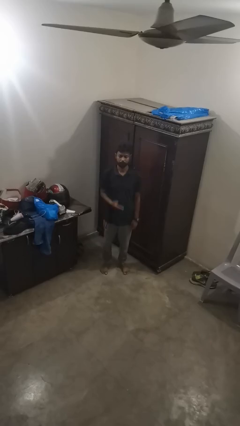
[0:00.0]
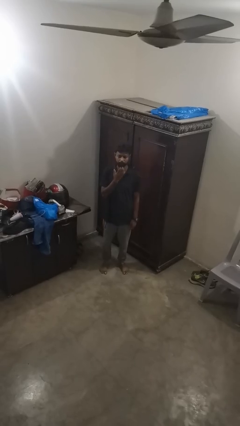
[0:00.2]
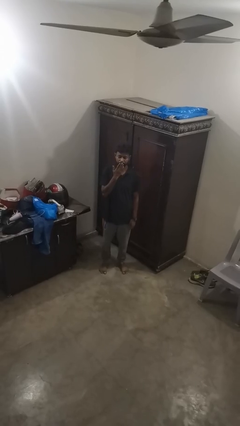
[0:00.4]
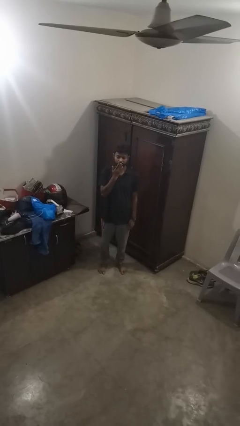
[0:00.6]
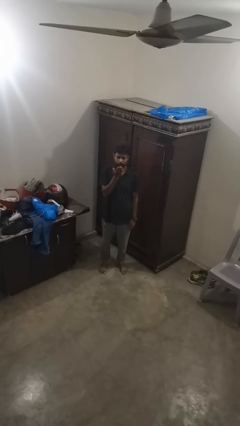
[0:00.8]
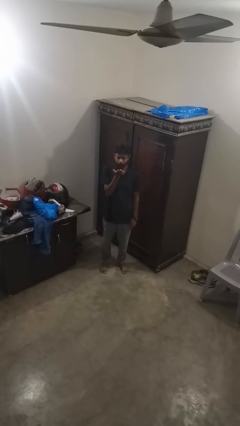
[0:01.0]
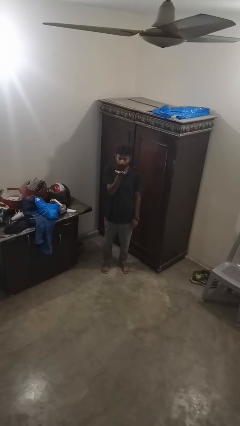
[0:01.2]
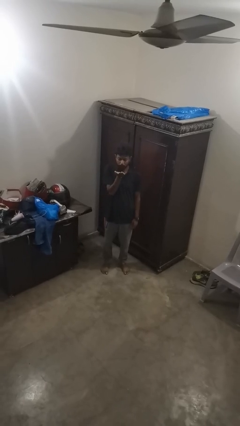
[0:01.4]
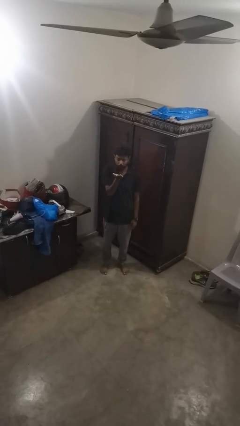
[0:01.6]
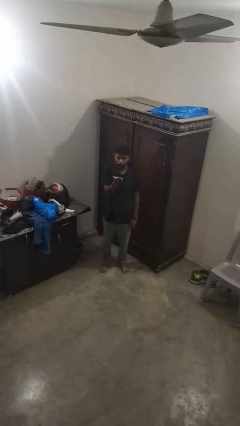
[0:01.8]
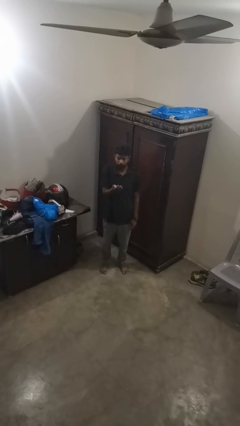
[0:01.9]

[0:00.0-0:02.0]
person gestures blow kiss

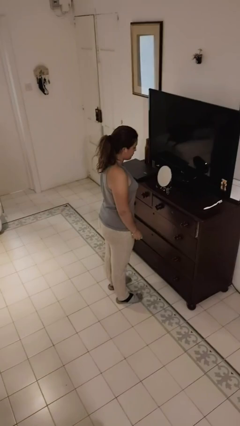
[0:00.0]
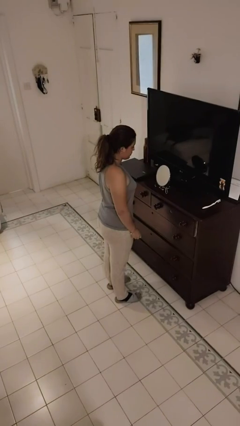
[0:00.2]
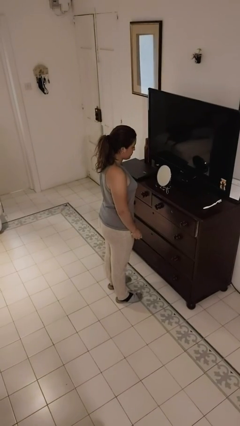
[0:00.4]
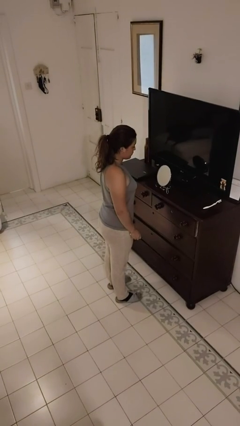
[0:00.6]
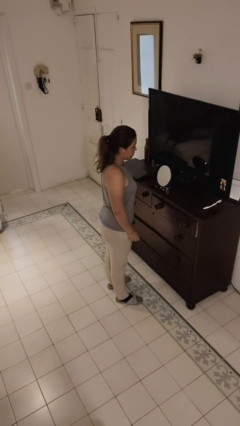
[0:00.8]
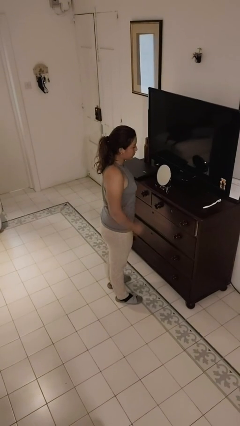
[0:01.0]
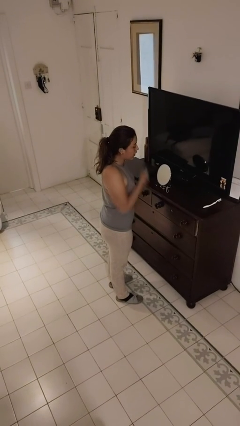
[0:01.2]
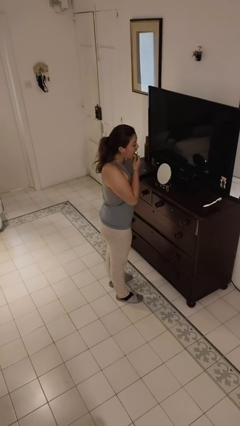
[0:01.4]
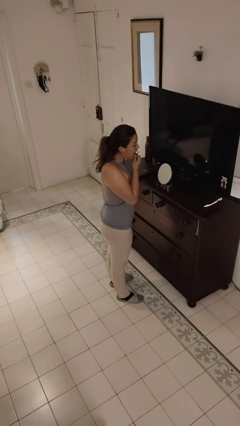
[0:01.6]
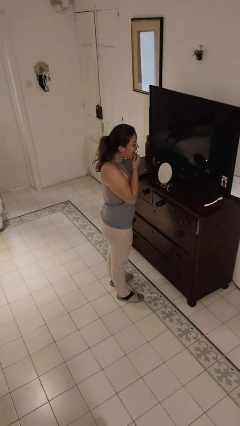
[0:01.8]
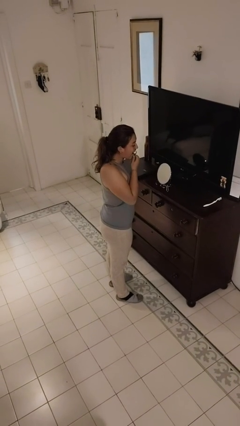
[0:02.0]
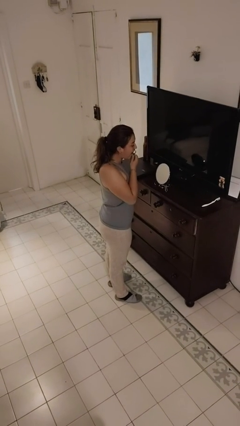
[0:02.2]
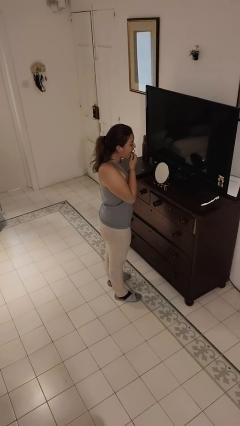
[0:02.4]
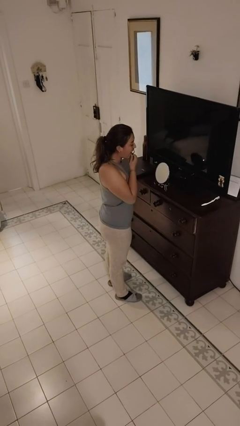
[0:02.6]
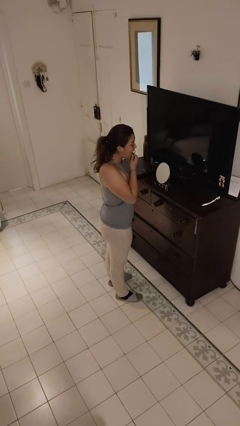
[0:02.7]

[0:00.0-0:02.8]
person flosses

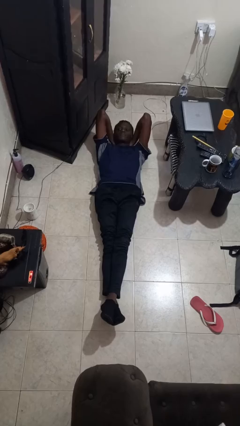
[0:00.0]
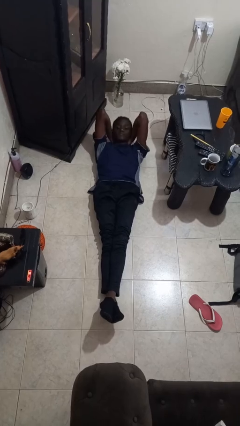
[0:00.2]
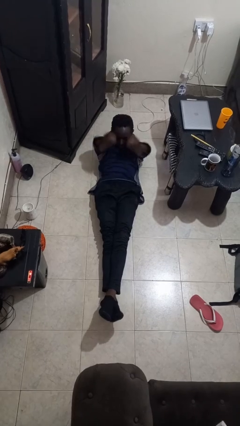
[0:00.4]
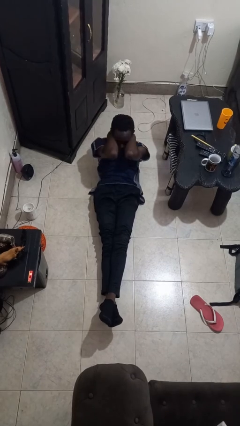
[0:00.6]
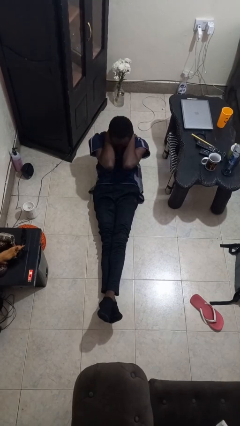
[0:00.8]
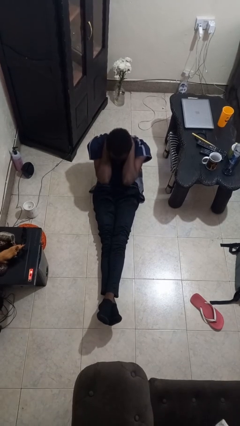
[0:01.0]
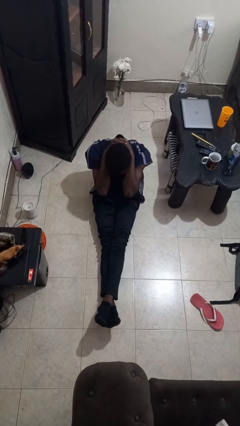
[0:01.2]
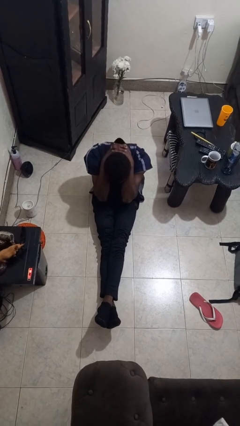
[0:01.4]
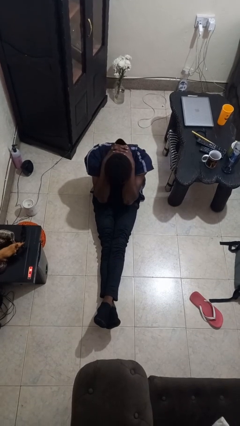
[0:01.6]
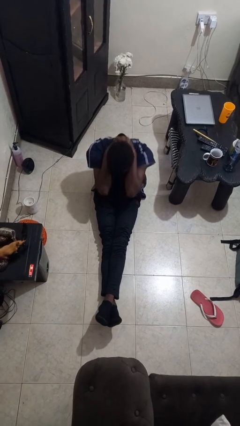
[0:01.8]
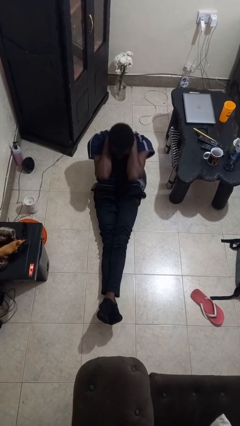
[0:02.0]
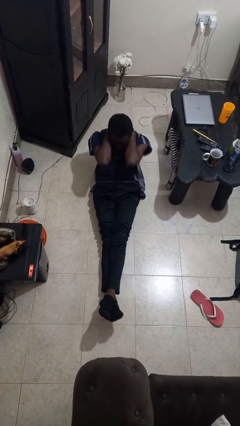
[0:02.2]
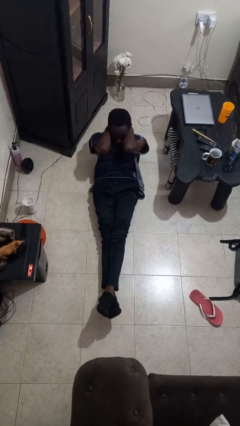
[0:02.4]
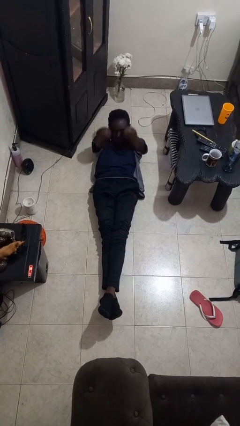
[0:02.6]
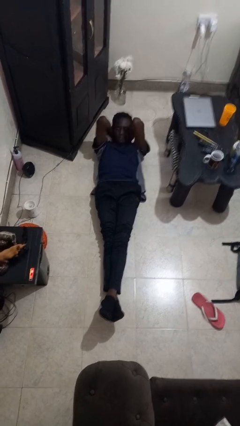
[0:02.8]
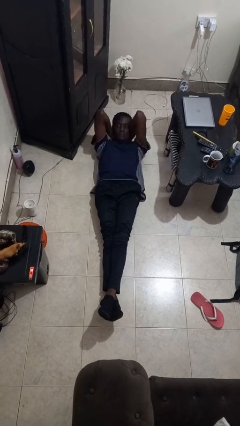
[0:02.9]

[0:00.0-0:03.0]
person exercises with situp

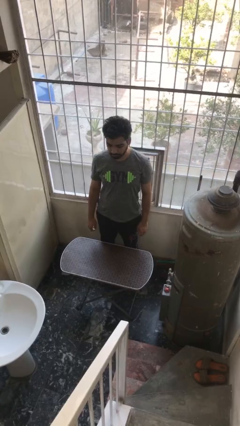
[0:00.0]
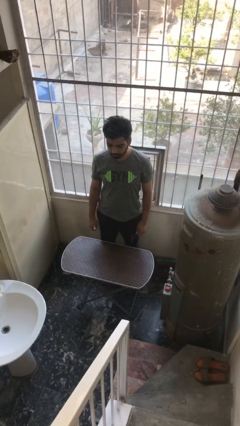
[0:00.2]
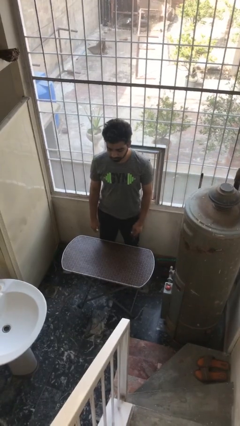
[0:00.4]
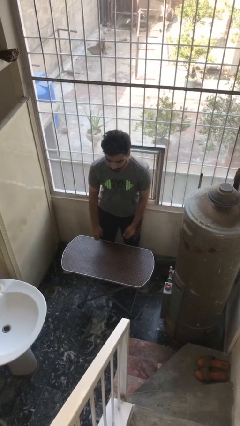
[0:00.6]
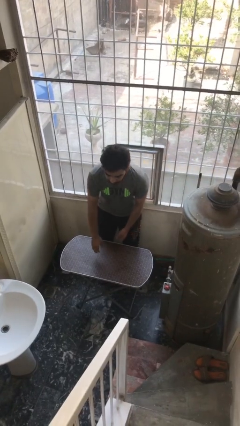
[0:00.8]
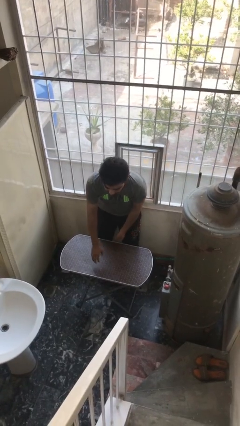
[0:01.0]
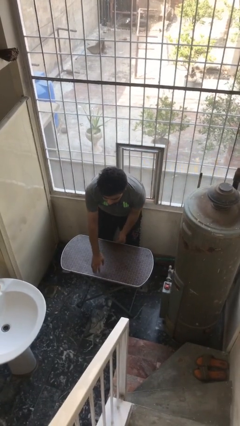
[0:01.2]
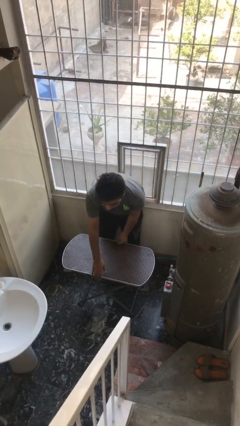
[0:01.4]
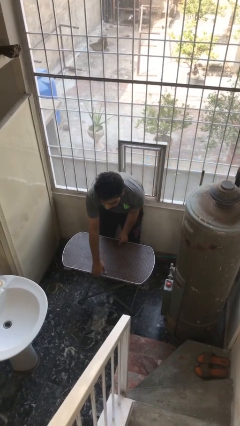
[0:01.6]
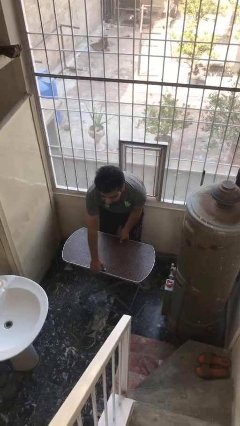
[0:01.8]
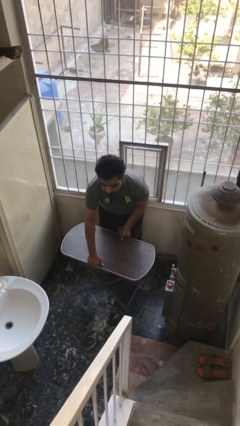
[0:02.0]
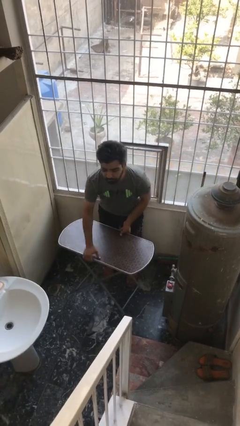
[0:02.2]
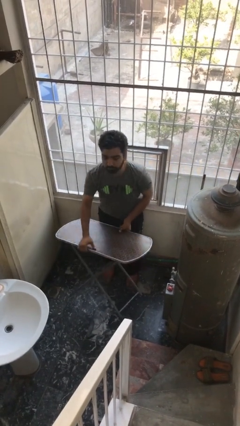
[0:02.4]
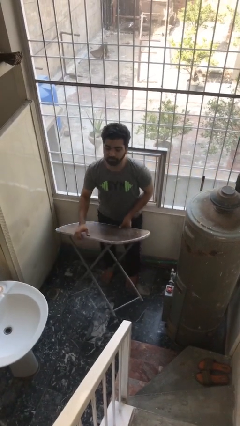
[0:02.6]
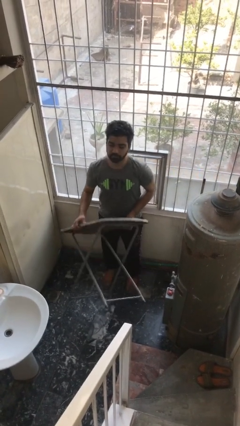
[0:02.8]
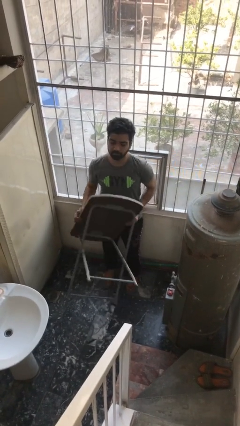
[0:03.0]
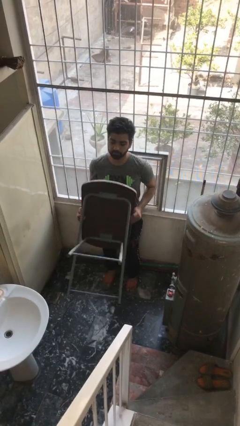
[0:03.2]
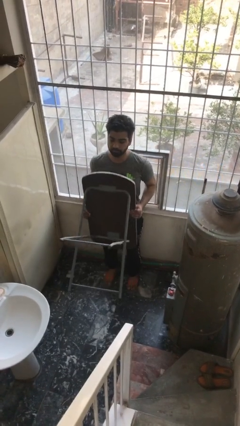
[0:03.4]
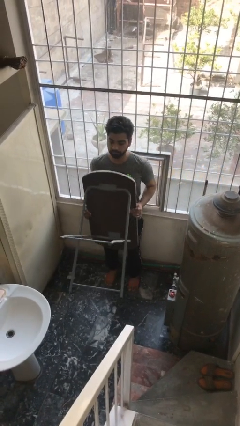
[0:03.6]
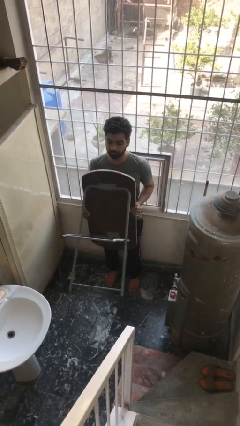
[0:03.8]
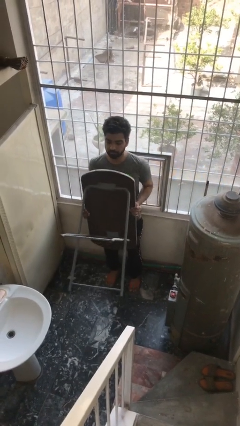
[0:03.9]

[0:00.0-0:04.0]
person picks up object from floor

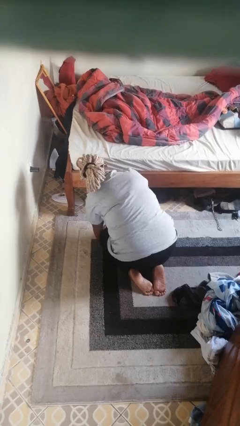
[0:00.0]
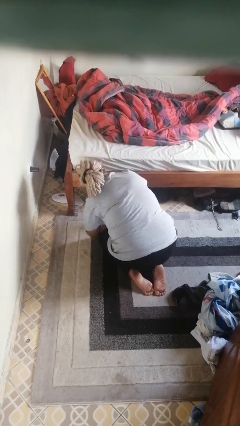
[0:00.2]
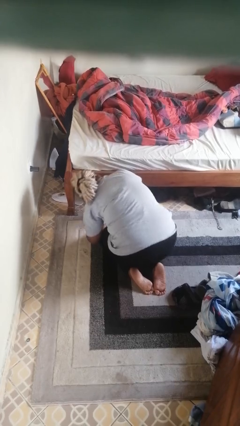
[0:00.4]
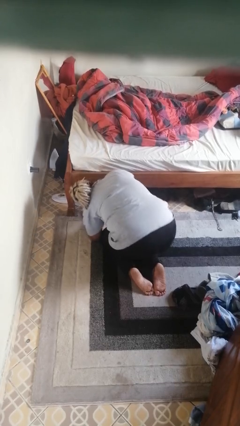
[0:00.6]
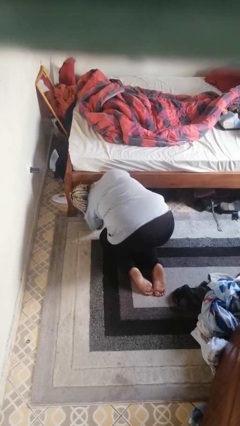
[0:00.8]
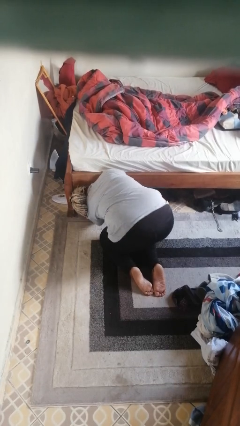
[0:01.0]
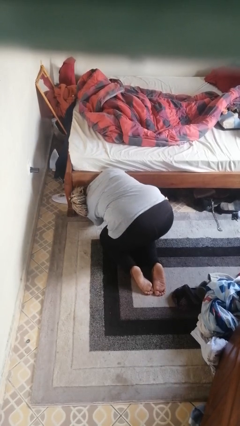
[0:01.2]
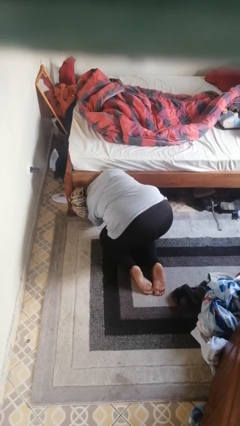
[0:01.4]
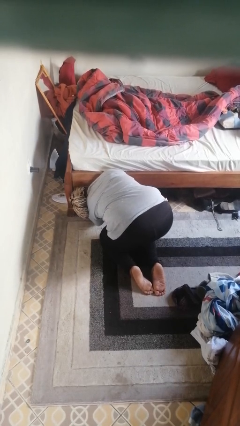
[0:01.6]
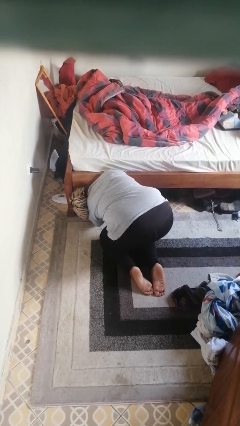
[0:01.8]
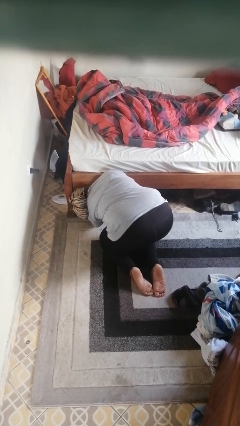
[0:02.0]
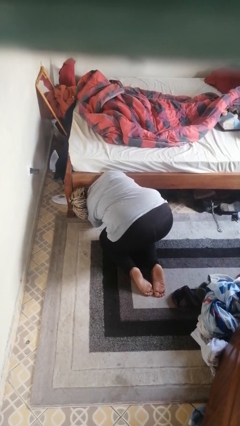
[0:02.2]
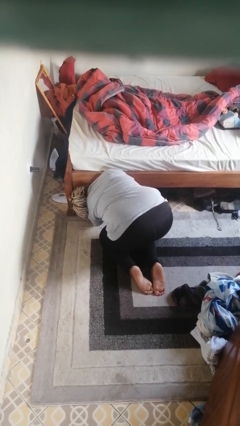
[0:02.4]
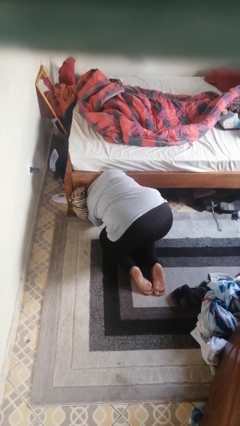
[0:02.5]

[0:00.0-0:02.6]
person searches under bed

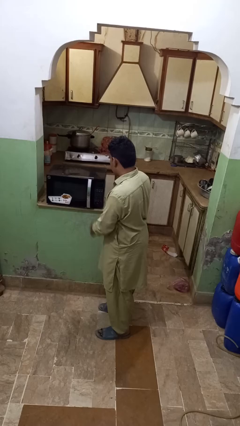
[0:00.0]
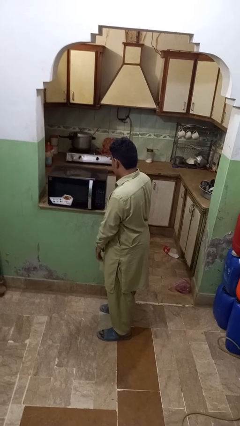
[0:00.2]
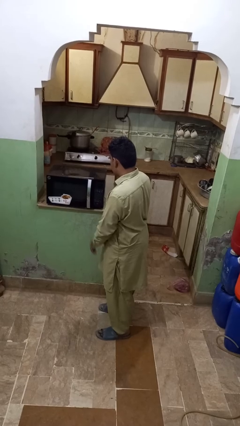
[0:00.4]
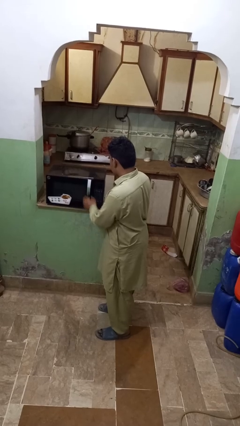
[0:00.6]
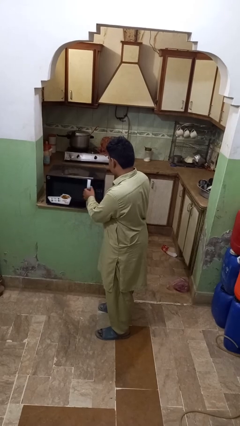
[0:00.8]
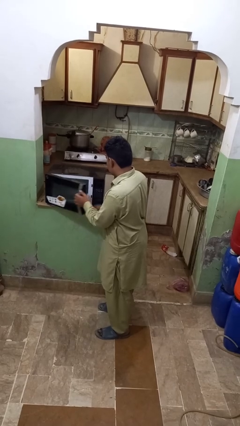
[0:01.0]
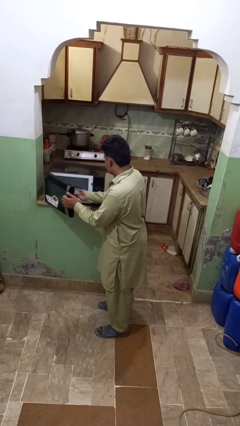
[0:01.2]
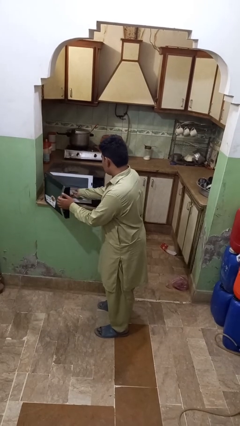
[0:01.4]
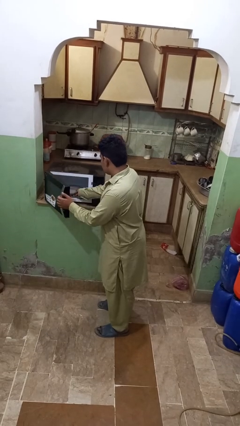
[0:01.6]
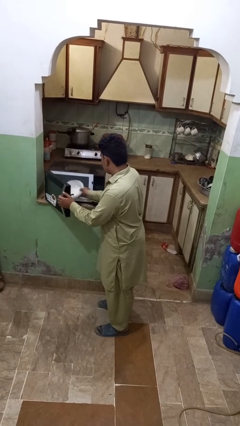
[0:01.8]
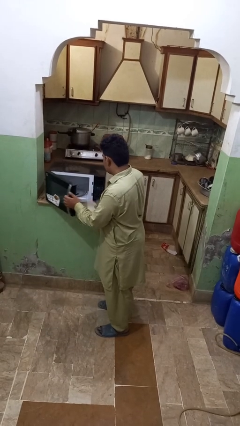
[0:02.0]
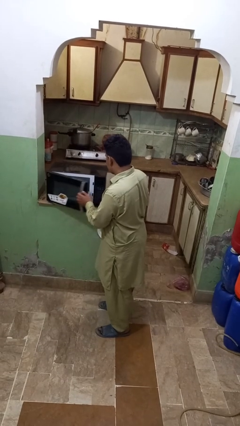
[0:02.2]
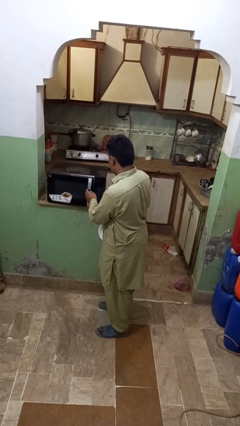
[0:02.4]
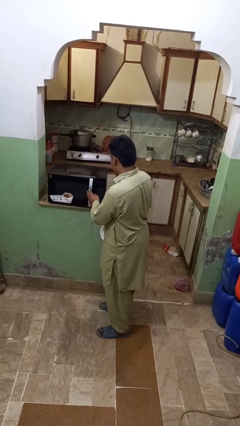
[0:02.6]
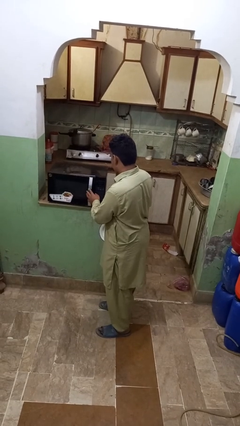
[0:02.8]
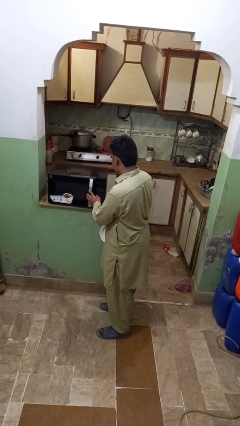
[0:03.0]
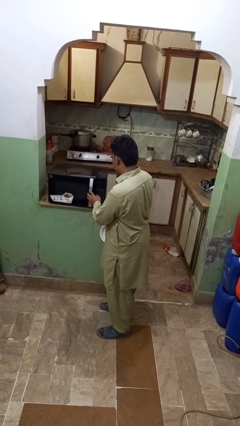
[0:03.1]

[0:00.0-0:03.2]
person takes object from microwave
